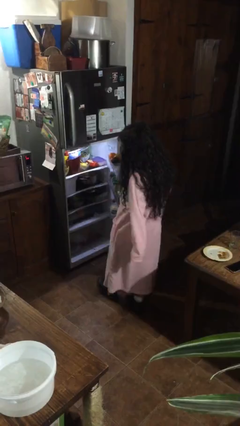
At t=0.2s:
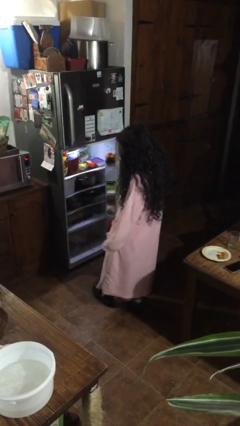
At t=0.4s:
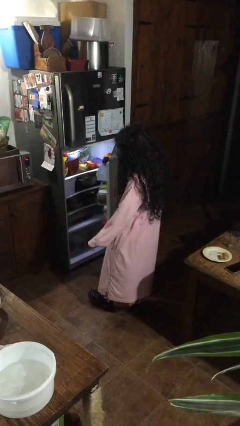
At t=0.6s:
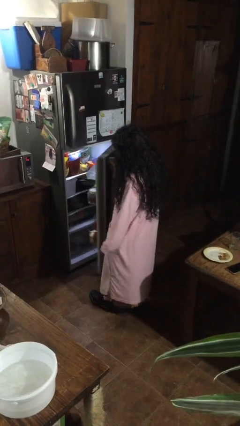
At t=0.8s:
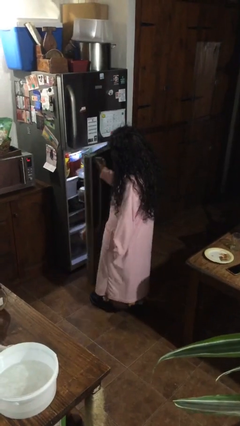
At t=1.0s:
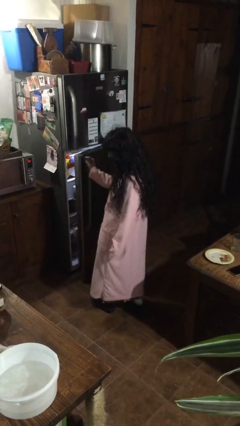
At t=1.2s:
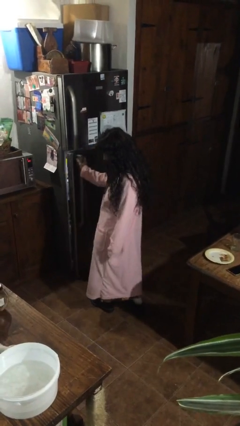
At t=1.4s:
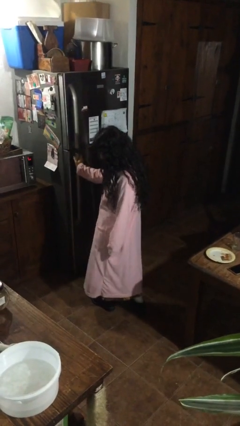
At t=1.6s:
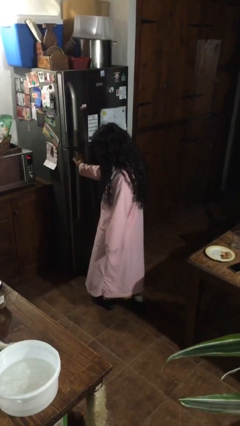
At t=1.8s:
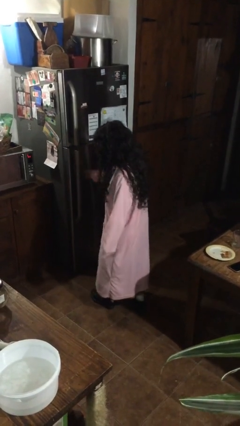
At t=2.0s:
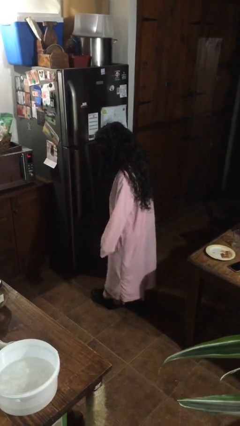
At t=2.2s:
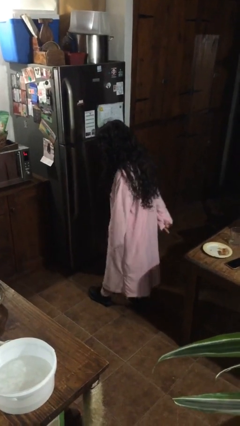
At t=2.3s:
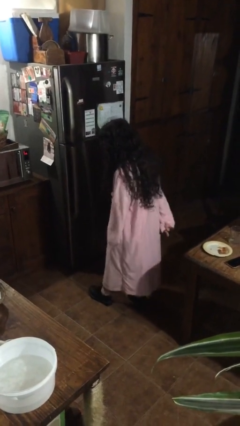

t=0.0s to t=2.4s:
person closes refrigerator

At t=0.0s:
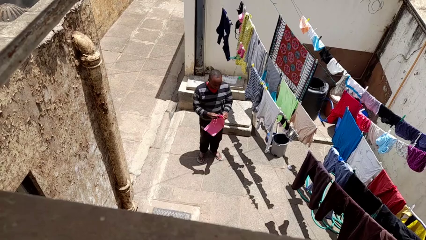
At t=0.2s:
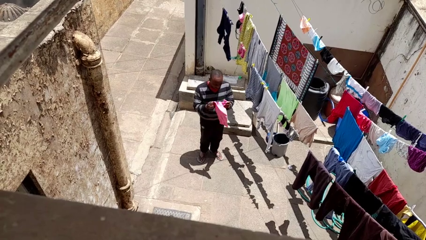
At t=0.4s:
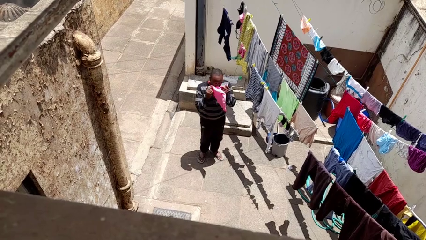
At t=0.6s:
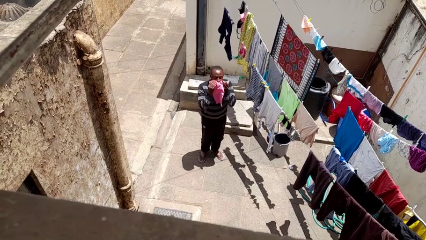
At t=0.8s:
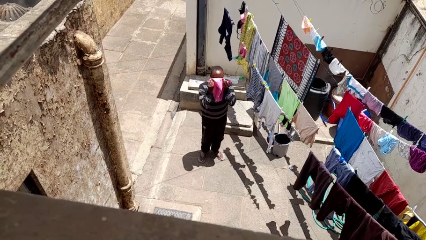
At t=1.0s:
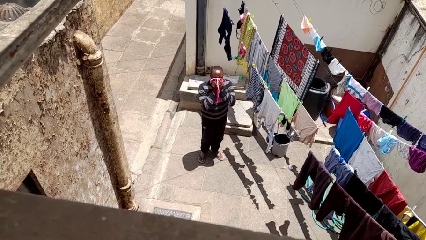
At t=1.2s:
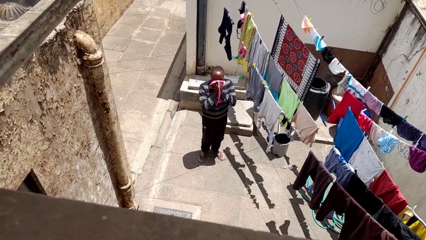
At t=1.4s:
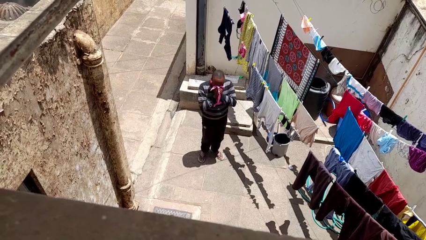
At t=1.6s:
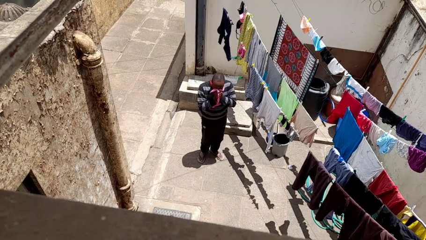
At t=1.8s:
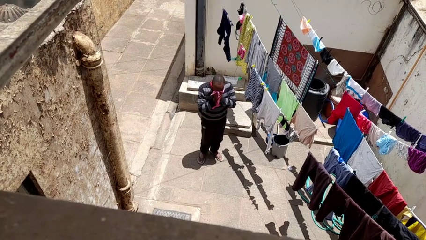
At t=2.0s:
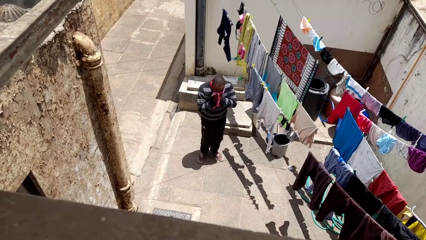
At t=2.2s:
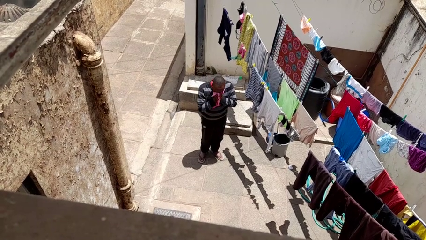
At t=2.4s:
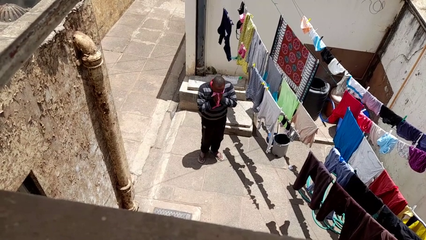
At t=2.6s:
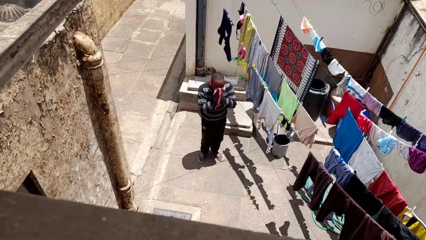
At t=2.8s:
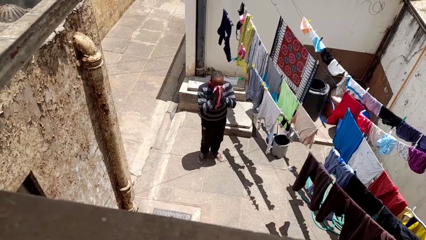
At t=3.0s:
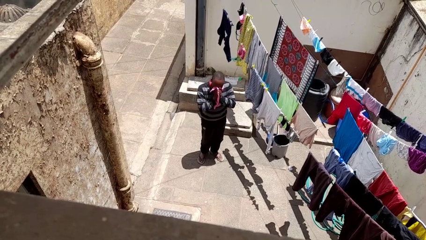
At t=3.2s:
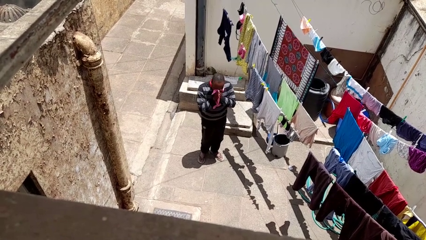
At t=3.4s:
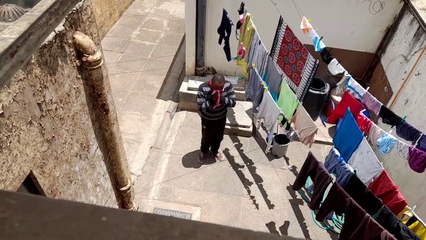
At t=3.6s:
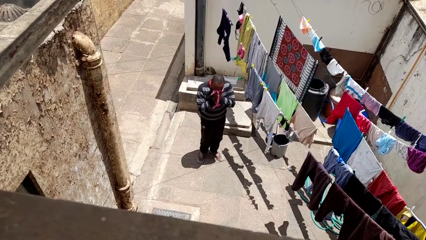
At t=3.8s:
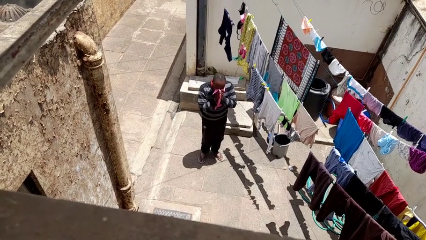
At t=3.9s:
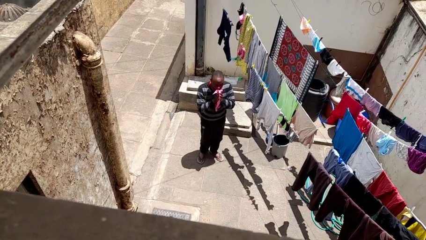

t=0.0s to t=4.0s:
person blows nose

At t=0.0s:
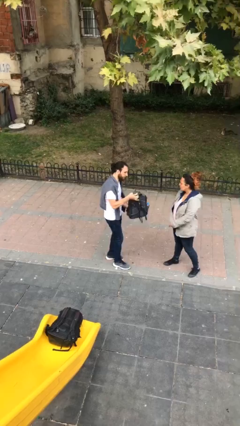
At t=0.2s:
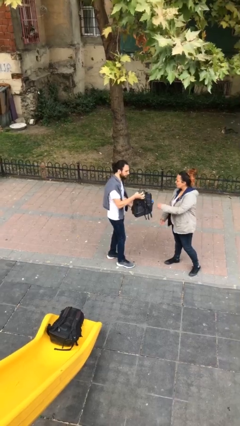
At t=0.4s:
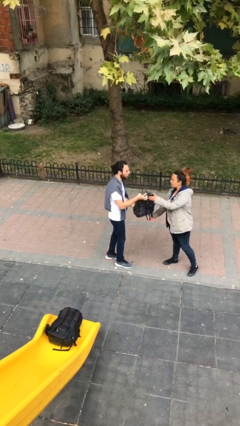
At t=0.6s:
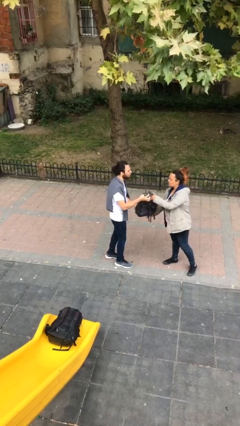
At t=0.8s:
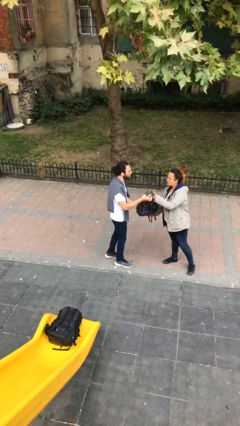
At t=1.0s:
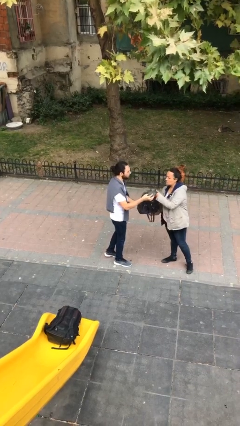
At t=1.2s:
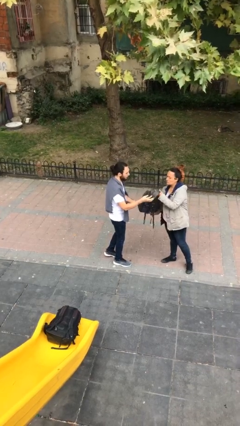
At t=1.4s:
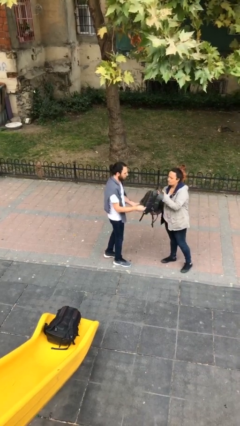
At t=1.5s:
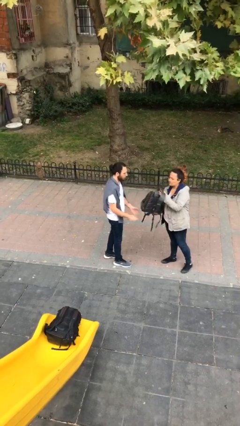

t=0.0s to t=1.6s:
person transfers object to person

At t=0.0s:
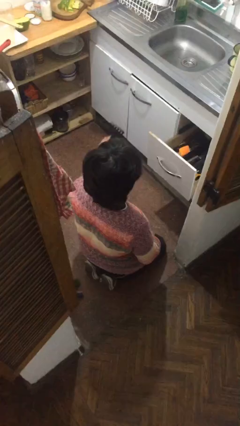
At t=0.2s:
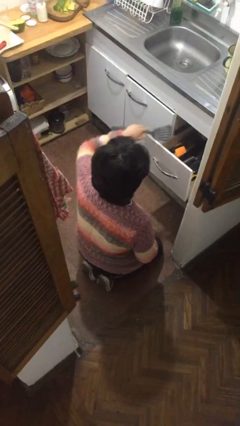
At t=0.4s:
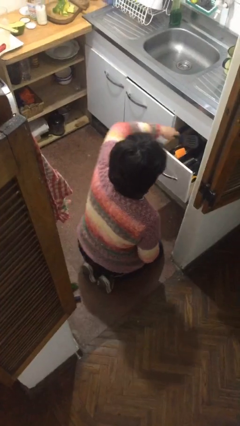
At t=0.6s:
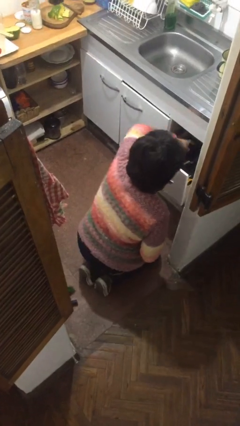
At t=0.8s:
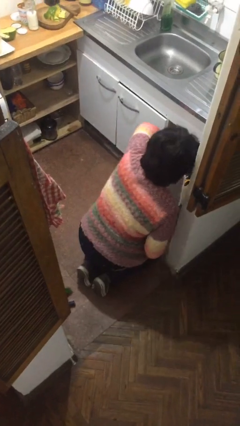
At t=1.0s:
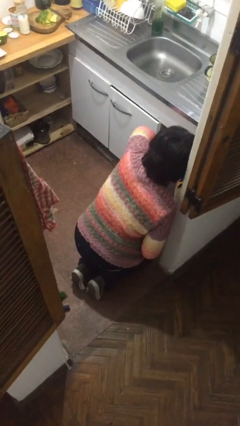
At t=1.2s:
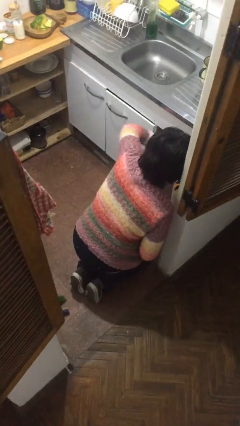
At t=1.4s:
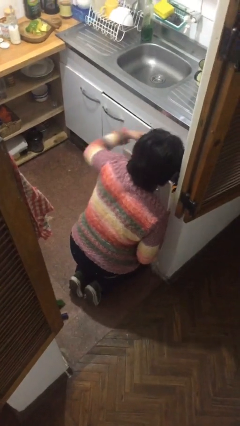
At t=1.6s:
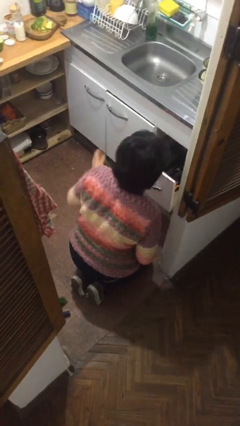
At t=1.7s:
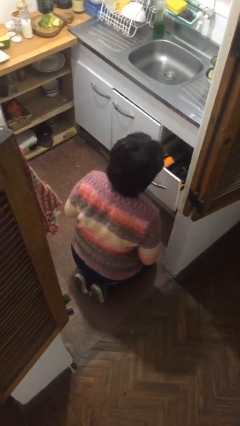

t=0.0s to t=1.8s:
person puts object into kitchen drawer

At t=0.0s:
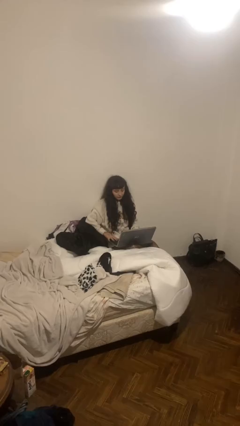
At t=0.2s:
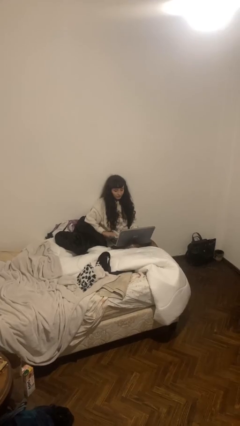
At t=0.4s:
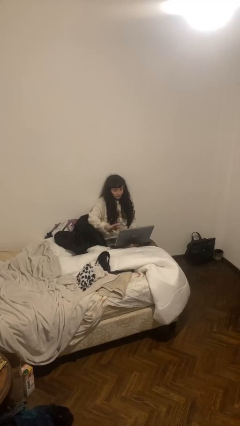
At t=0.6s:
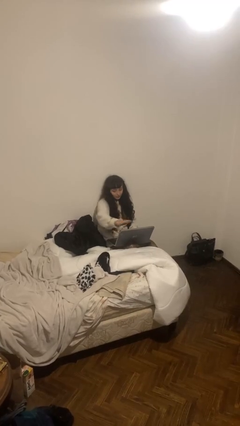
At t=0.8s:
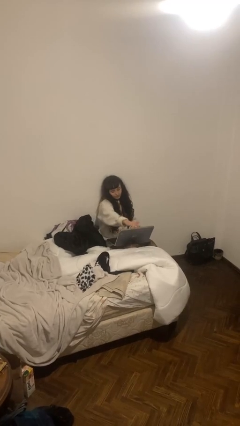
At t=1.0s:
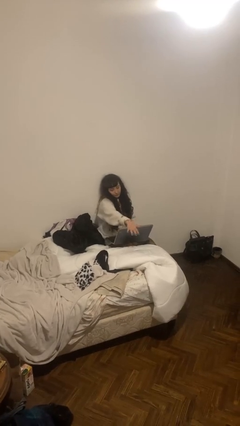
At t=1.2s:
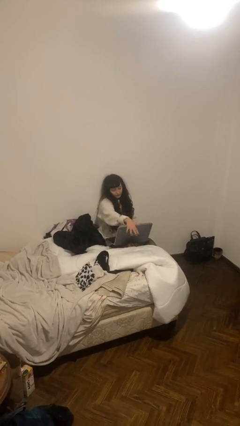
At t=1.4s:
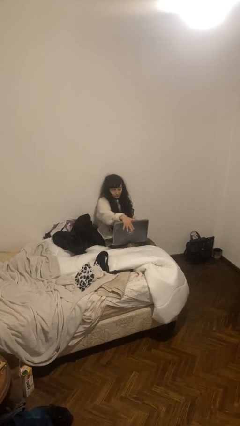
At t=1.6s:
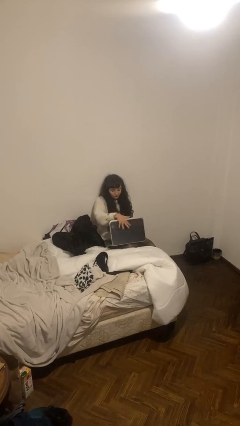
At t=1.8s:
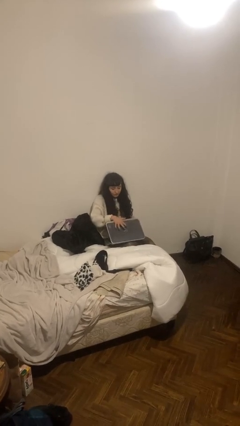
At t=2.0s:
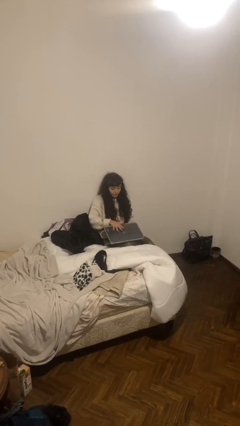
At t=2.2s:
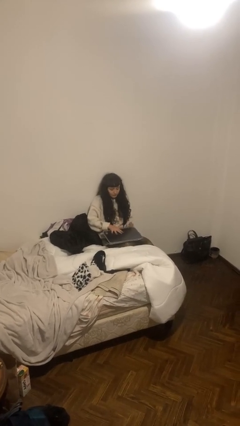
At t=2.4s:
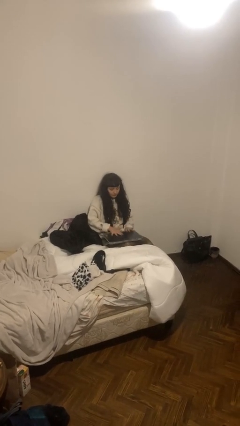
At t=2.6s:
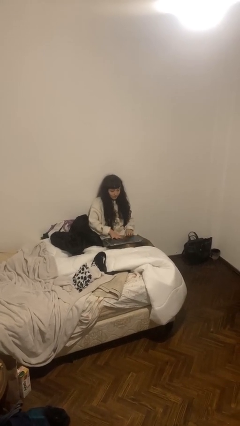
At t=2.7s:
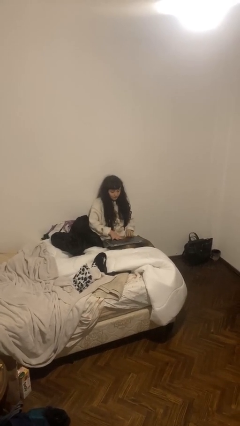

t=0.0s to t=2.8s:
person closes laptop

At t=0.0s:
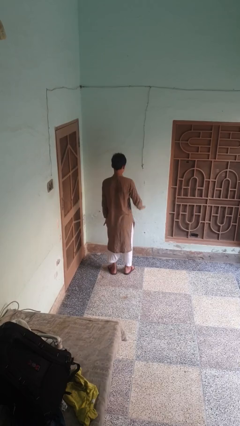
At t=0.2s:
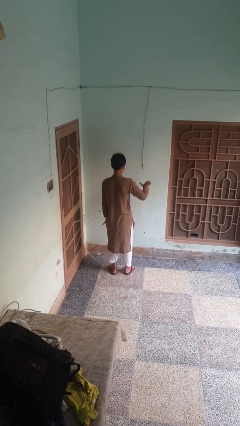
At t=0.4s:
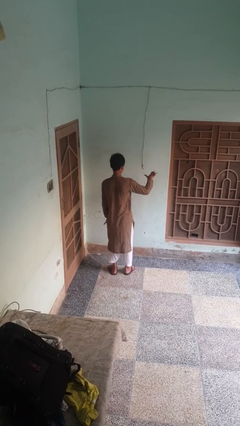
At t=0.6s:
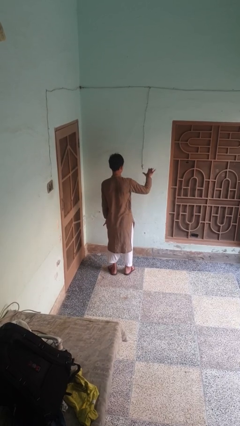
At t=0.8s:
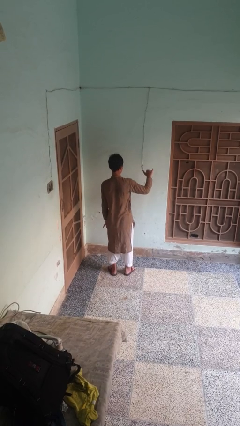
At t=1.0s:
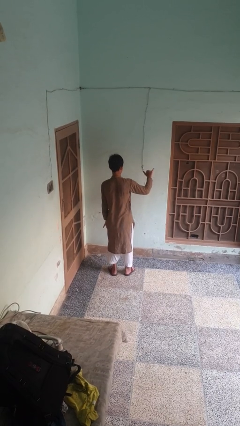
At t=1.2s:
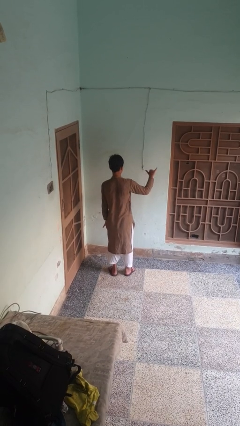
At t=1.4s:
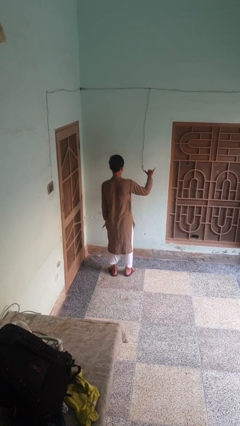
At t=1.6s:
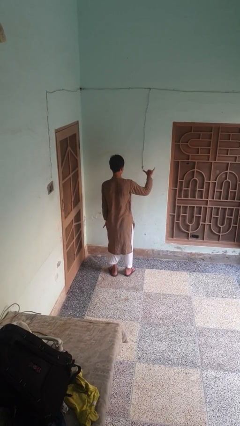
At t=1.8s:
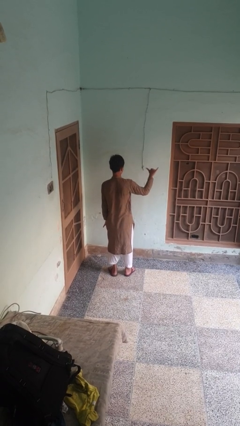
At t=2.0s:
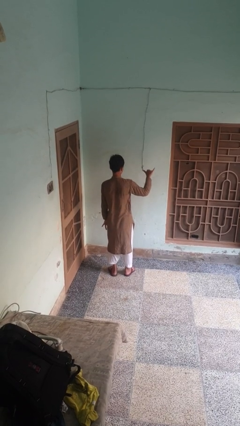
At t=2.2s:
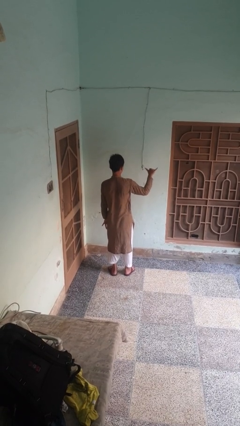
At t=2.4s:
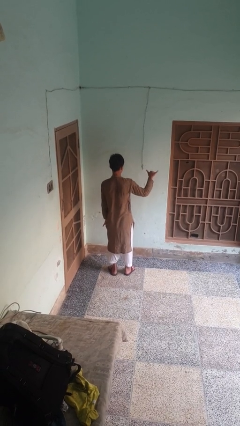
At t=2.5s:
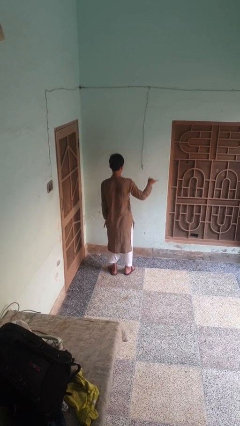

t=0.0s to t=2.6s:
person gestures hang loose

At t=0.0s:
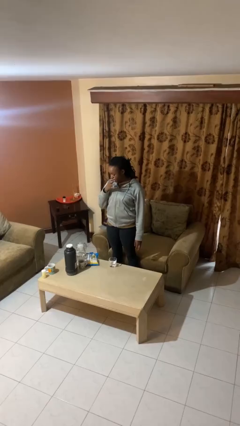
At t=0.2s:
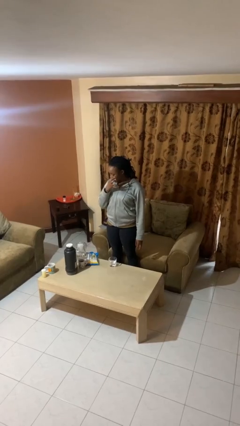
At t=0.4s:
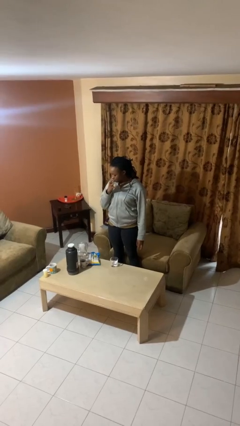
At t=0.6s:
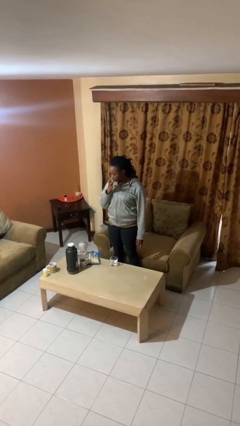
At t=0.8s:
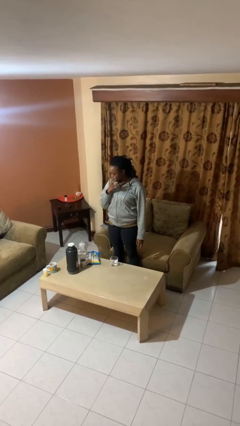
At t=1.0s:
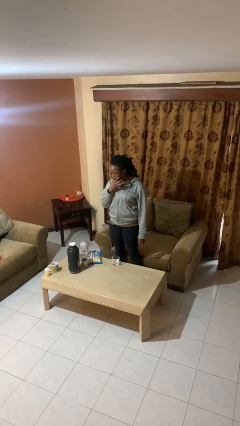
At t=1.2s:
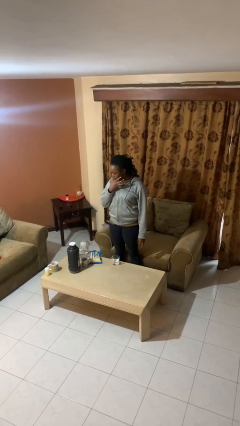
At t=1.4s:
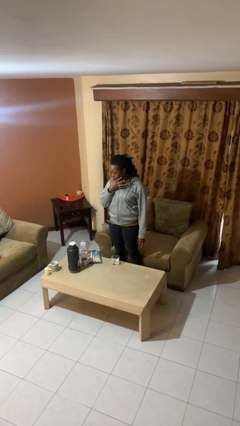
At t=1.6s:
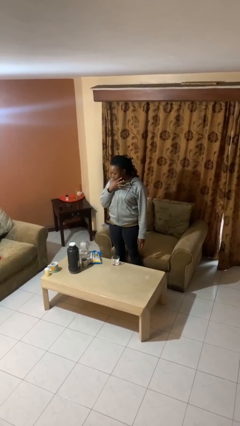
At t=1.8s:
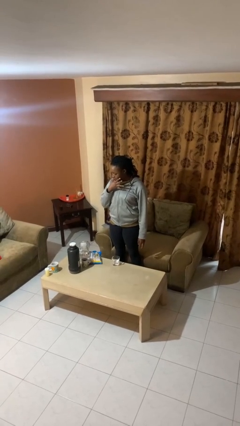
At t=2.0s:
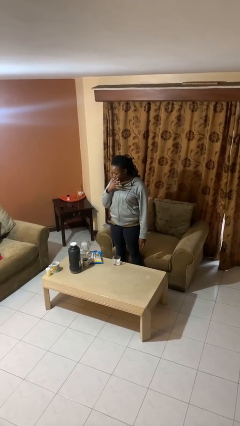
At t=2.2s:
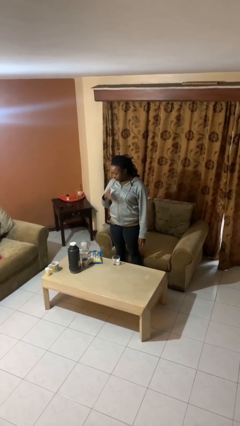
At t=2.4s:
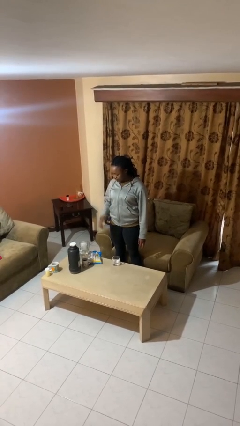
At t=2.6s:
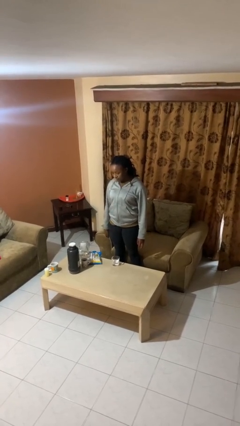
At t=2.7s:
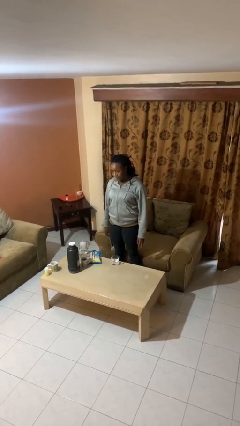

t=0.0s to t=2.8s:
person licks fingers
